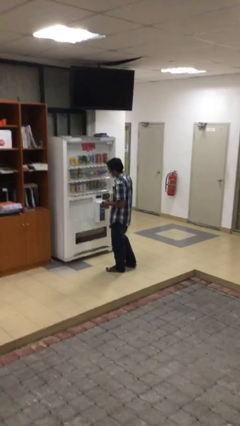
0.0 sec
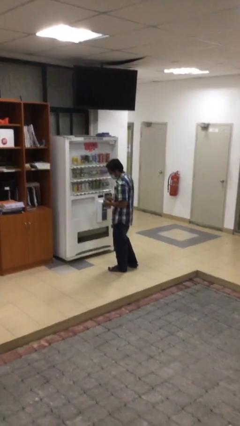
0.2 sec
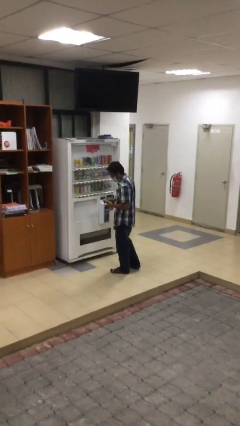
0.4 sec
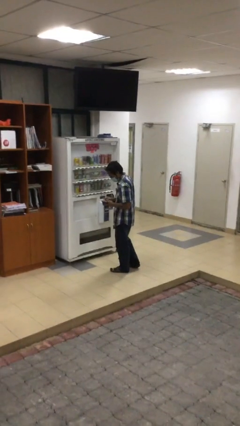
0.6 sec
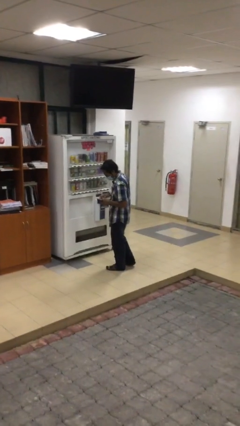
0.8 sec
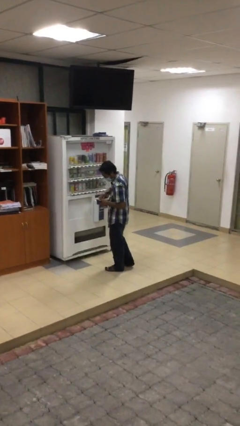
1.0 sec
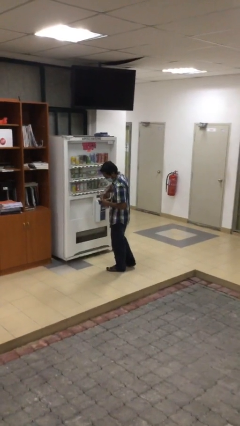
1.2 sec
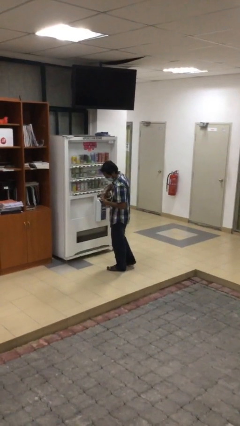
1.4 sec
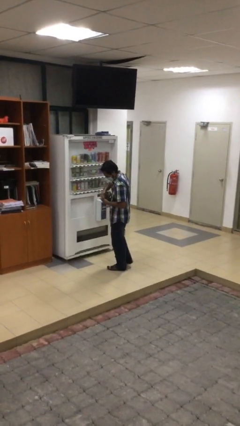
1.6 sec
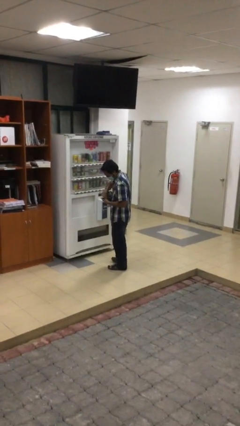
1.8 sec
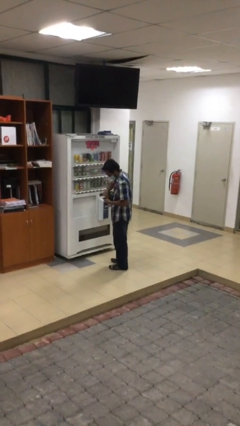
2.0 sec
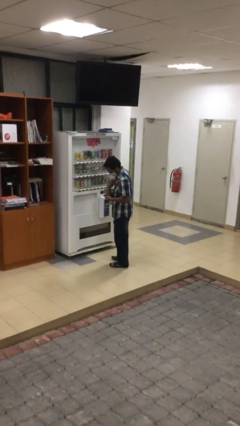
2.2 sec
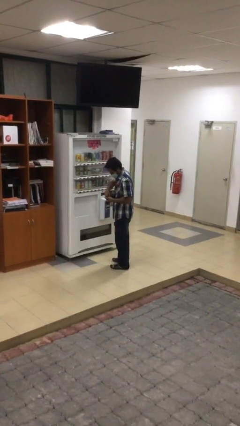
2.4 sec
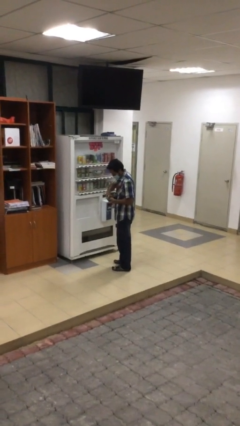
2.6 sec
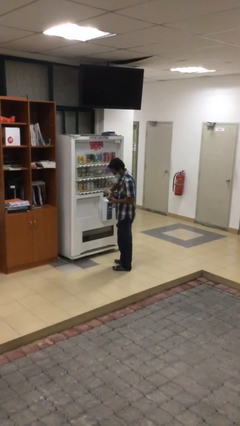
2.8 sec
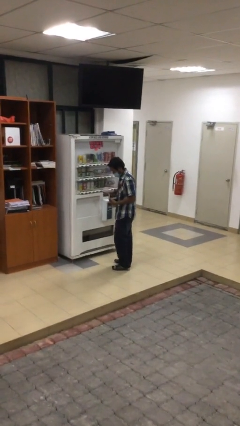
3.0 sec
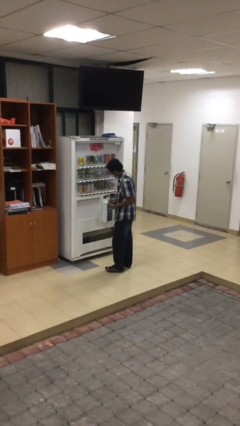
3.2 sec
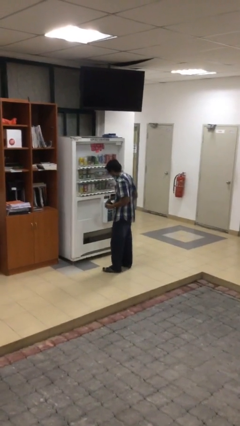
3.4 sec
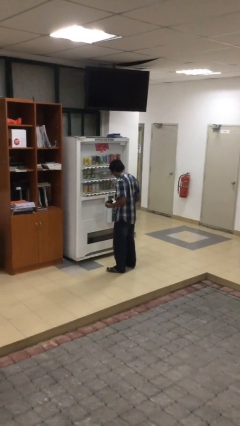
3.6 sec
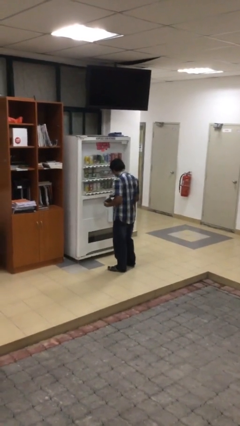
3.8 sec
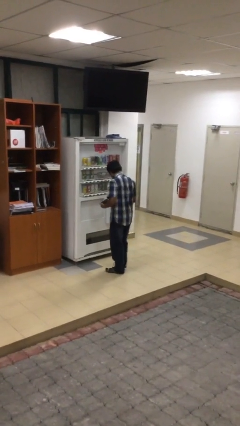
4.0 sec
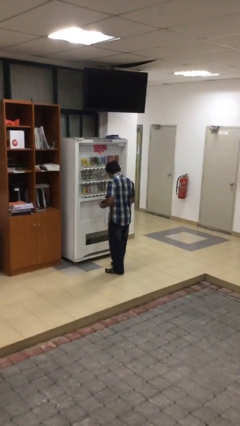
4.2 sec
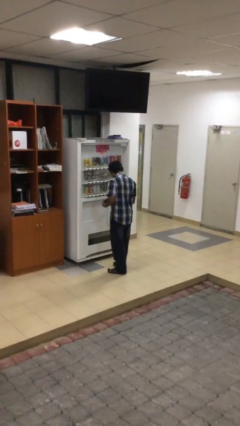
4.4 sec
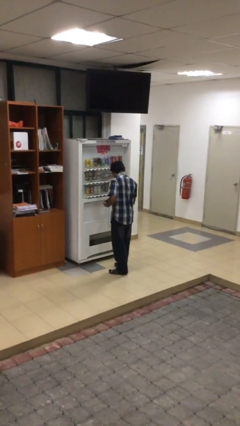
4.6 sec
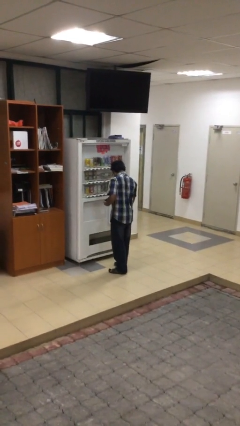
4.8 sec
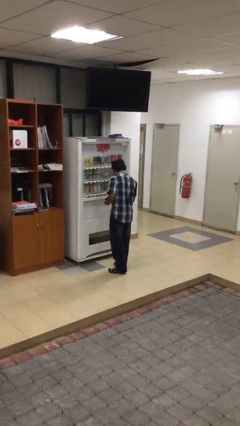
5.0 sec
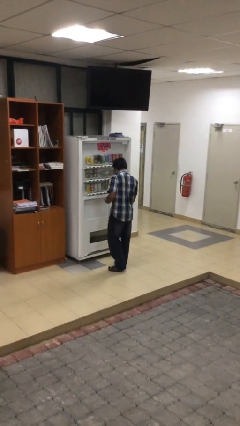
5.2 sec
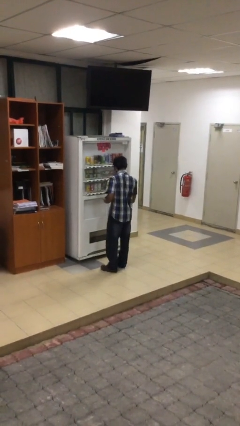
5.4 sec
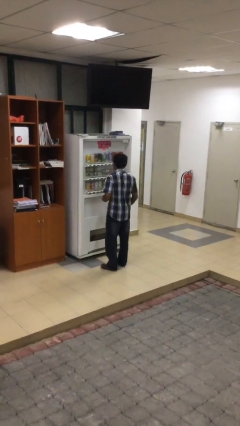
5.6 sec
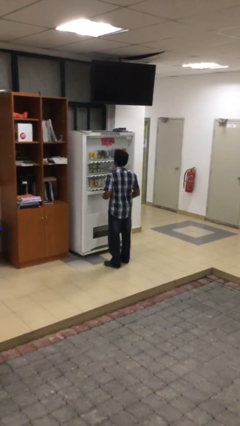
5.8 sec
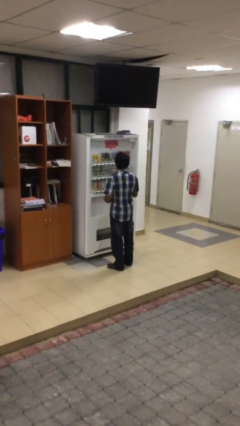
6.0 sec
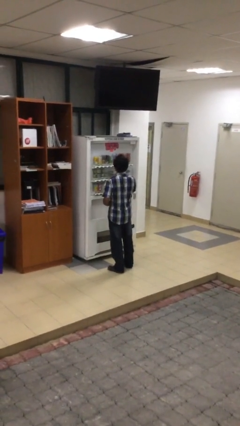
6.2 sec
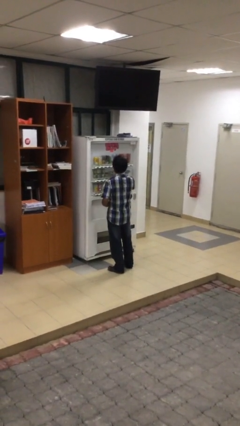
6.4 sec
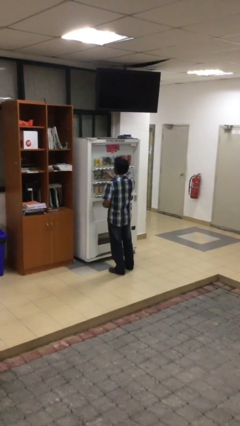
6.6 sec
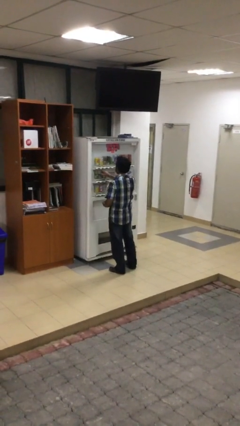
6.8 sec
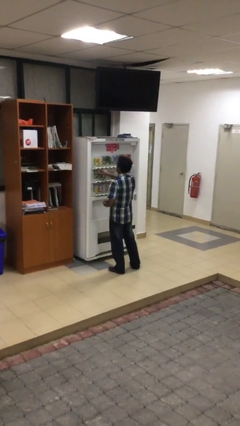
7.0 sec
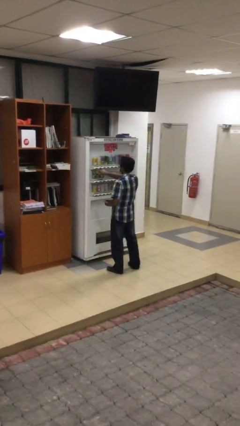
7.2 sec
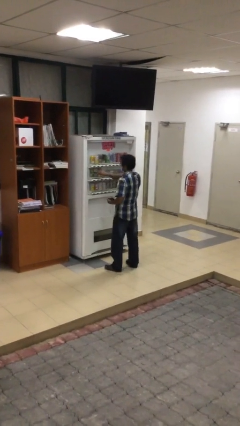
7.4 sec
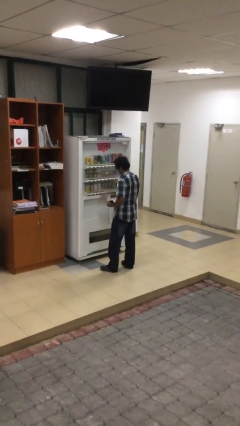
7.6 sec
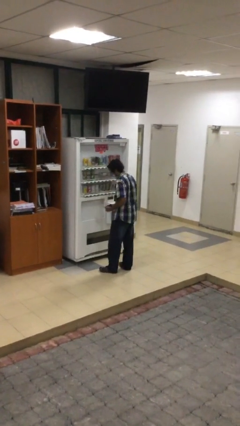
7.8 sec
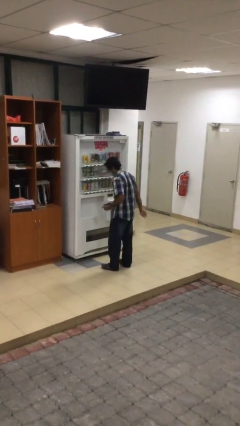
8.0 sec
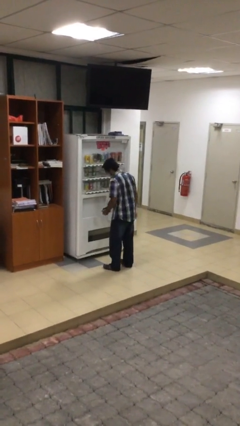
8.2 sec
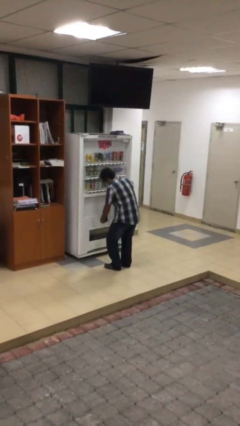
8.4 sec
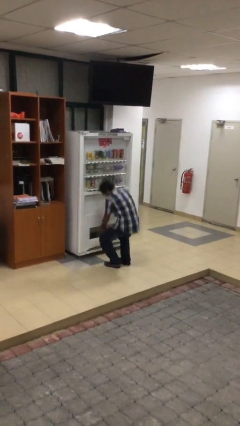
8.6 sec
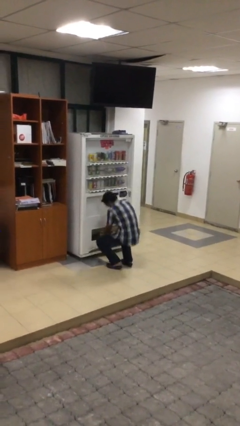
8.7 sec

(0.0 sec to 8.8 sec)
person purchases from machine

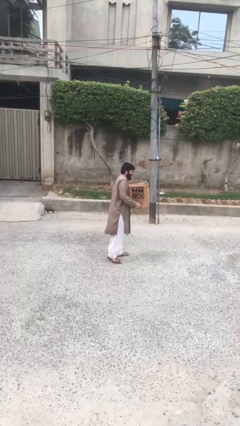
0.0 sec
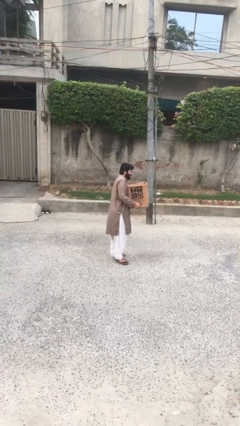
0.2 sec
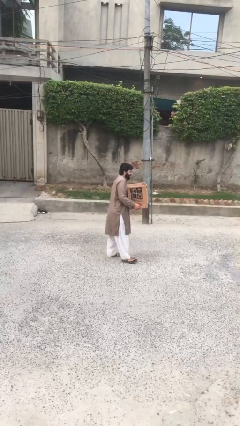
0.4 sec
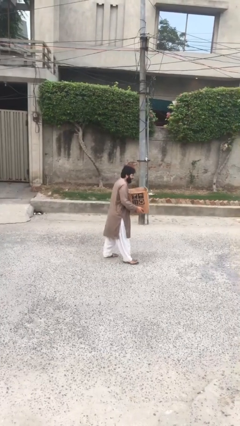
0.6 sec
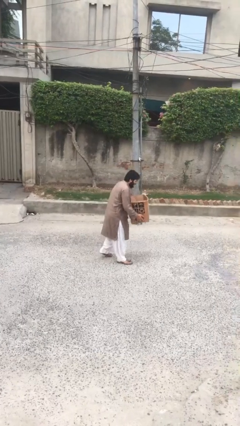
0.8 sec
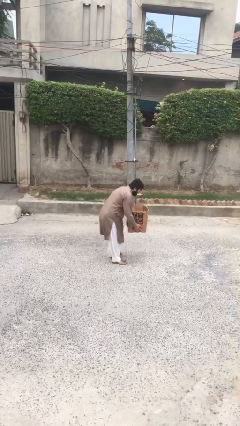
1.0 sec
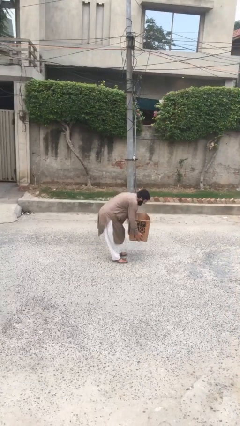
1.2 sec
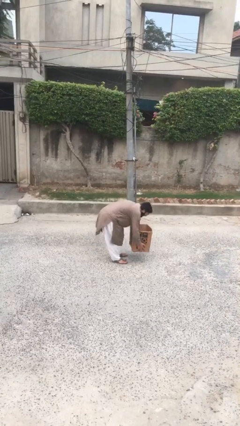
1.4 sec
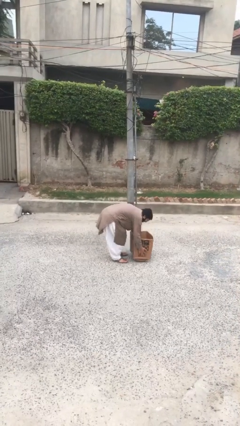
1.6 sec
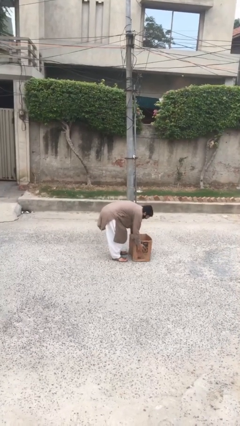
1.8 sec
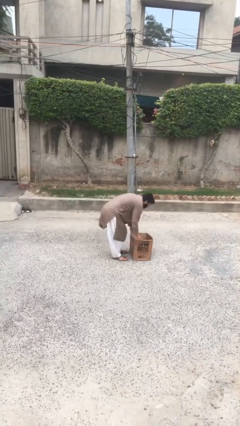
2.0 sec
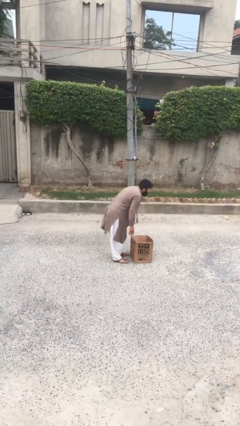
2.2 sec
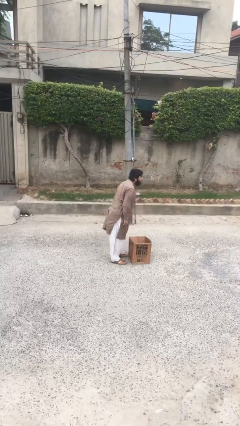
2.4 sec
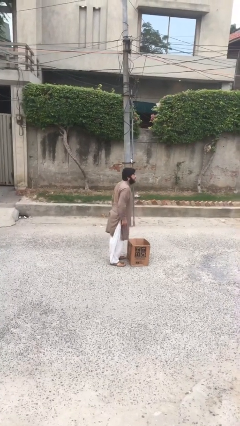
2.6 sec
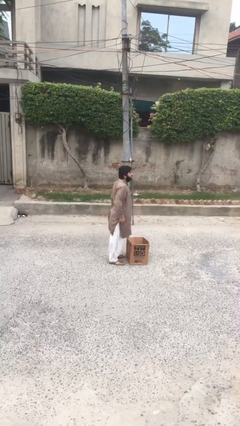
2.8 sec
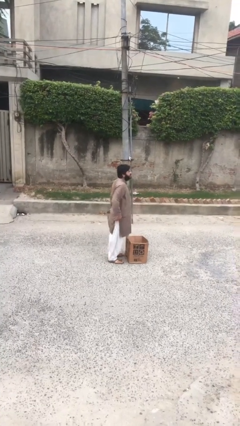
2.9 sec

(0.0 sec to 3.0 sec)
person puts down object on floor

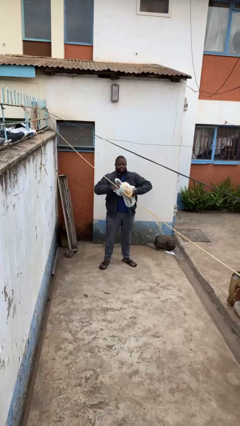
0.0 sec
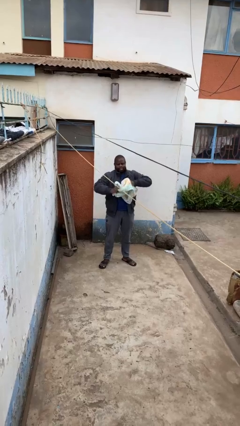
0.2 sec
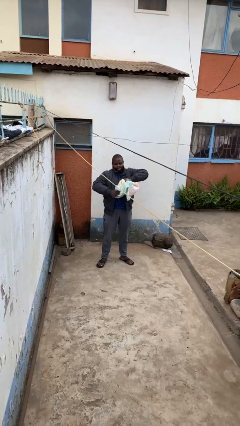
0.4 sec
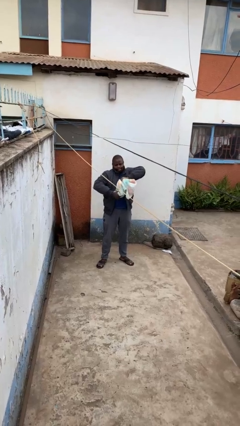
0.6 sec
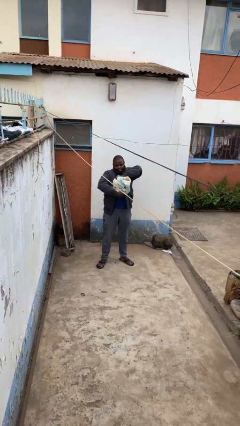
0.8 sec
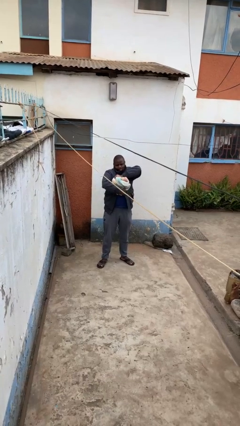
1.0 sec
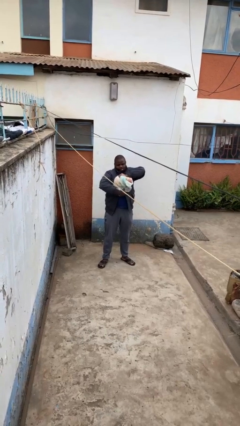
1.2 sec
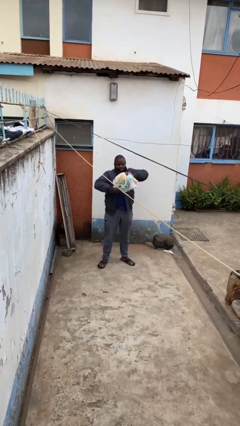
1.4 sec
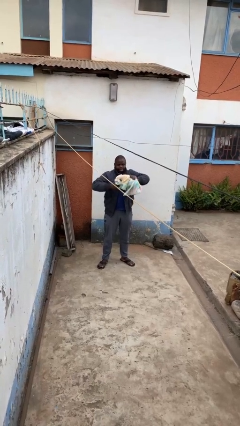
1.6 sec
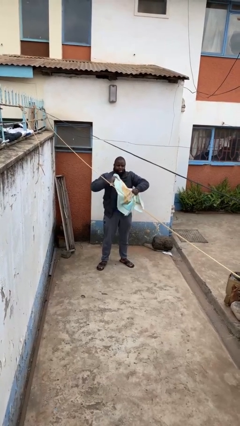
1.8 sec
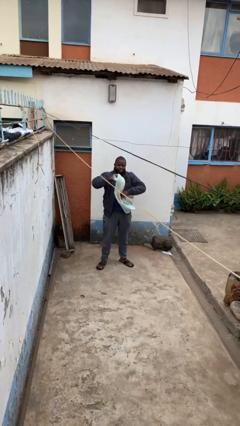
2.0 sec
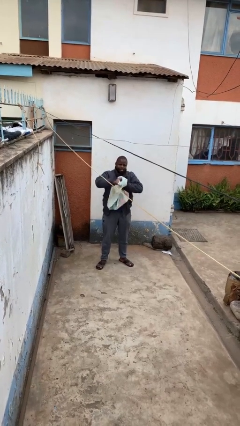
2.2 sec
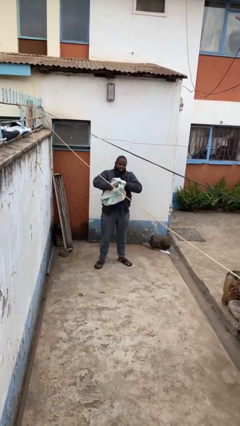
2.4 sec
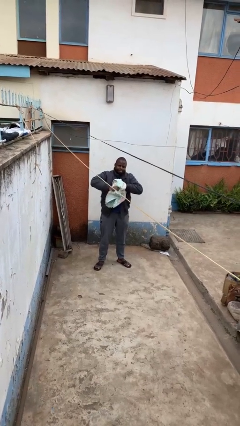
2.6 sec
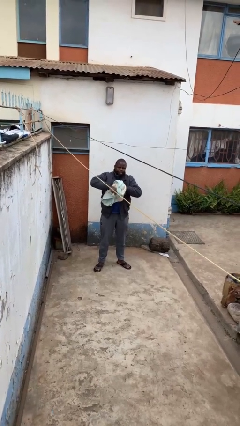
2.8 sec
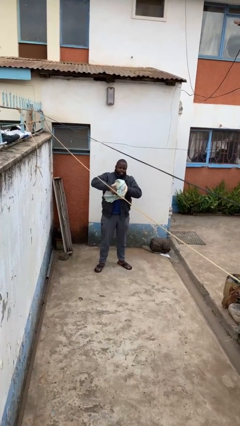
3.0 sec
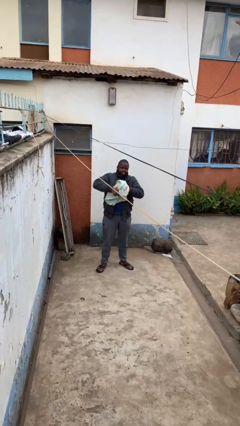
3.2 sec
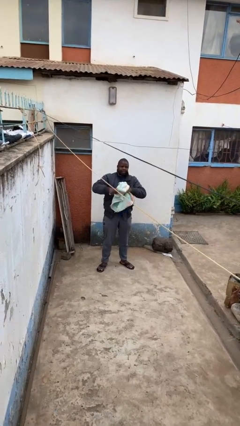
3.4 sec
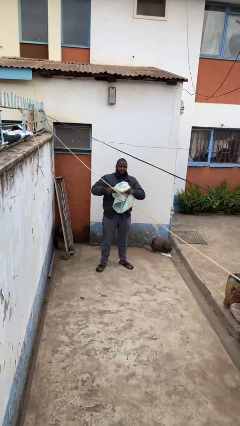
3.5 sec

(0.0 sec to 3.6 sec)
person squeezes object

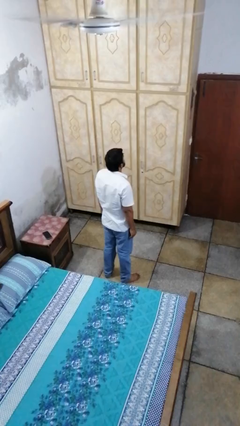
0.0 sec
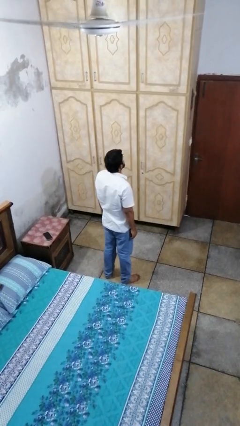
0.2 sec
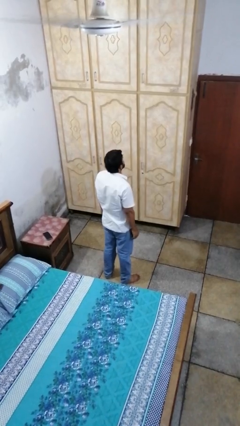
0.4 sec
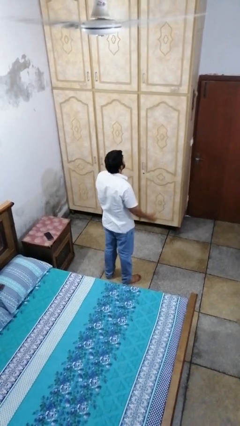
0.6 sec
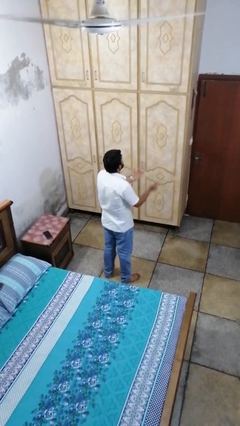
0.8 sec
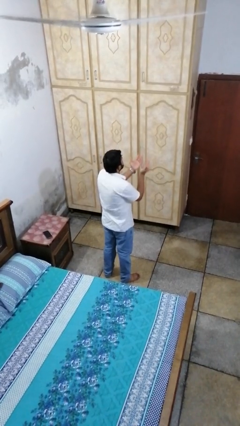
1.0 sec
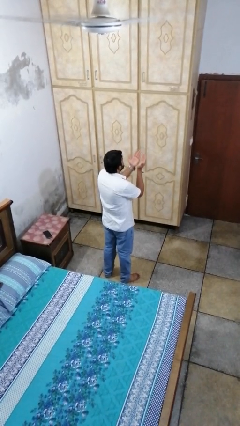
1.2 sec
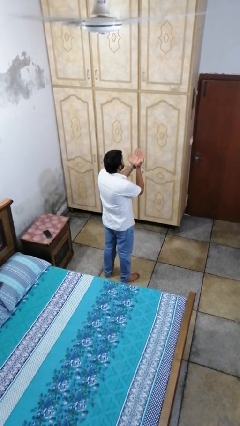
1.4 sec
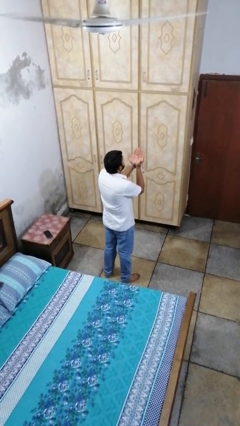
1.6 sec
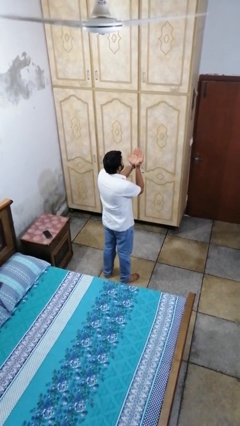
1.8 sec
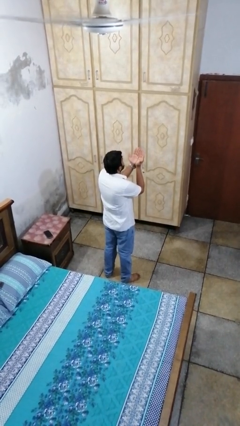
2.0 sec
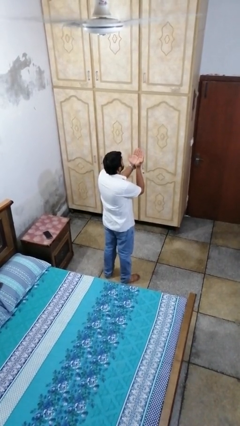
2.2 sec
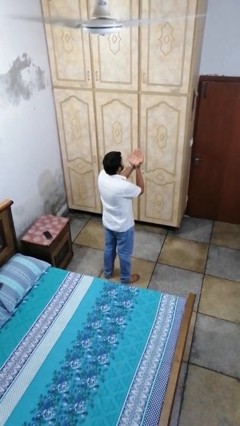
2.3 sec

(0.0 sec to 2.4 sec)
person prays
